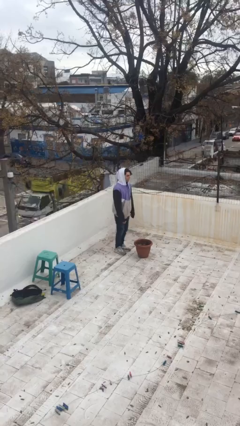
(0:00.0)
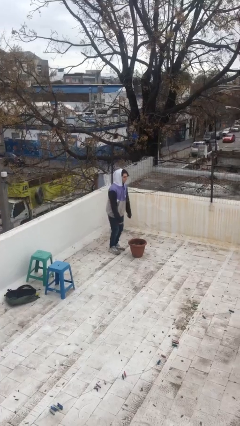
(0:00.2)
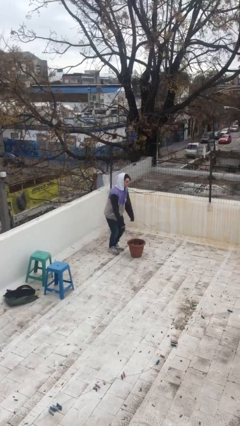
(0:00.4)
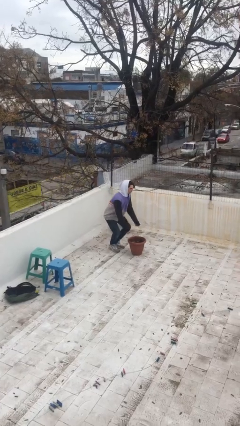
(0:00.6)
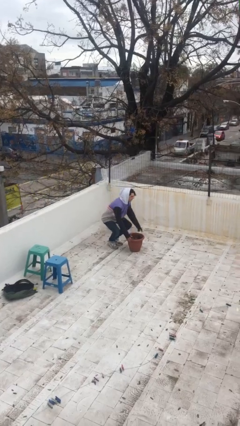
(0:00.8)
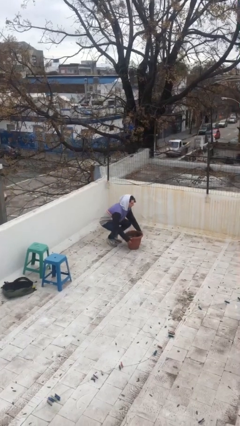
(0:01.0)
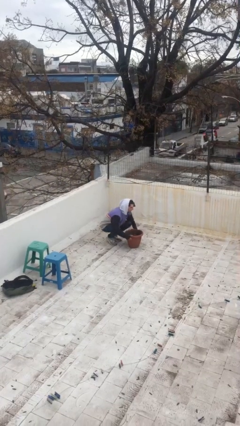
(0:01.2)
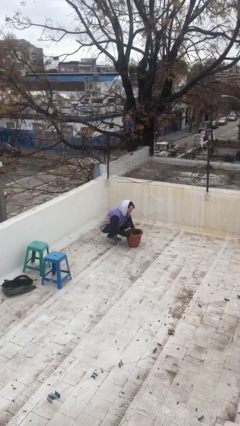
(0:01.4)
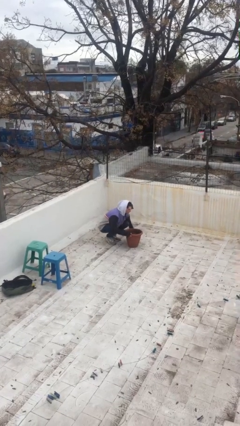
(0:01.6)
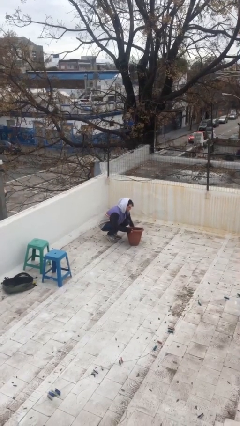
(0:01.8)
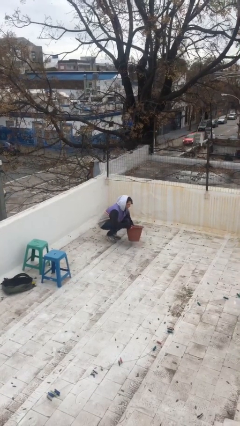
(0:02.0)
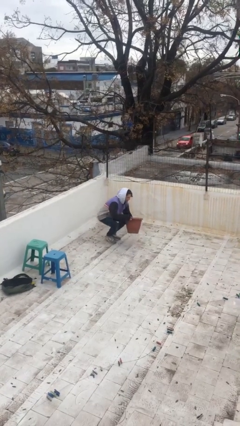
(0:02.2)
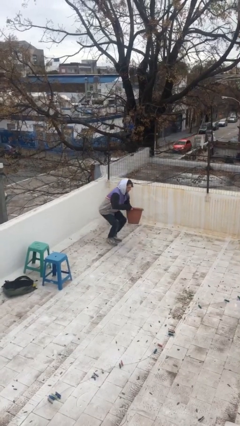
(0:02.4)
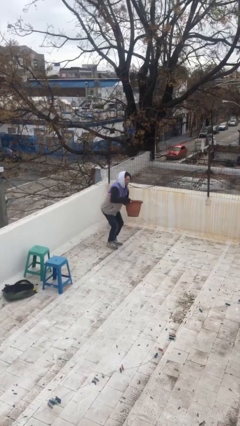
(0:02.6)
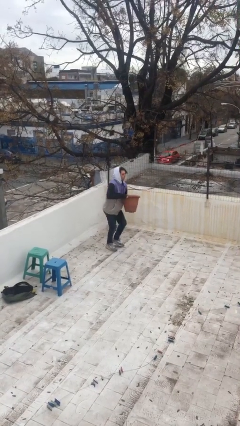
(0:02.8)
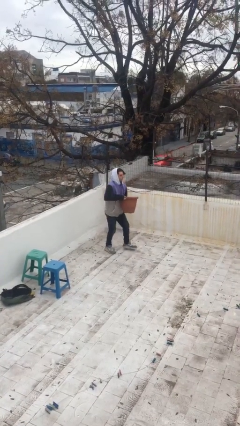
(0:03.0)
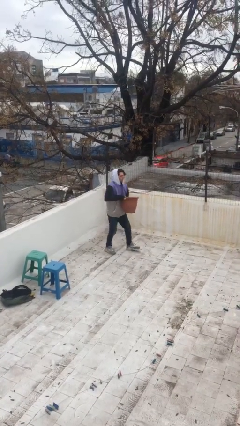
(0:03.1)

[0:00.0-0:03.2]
person picks up object from floor

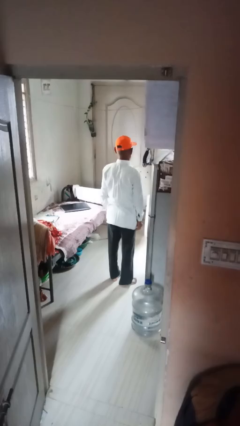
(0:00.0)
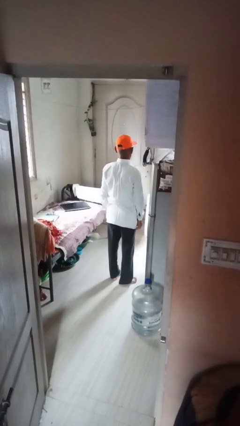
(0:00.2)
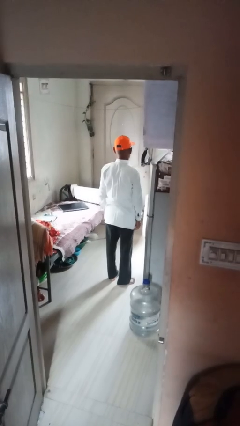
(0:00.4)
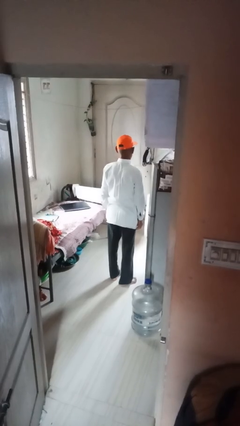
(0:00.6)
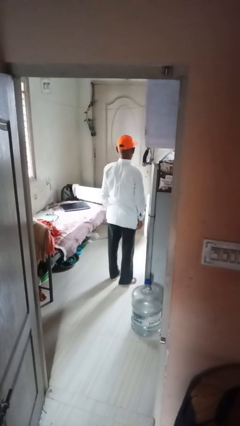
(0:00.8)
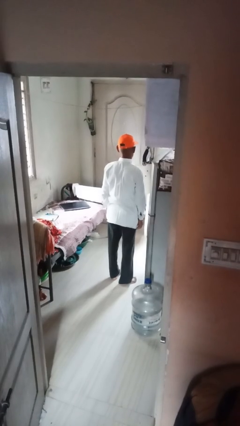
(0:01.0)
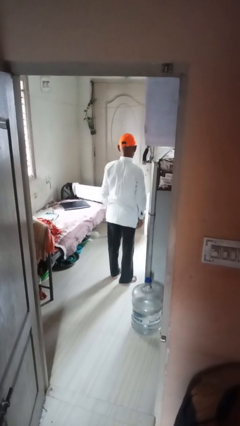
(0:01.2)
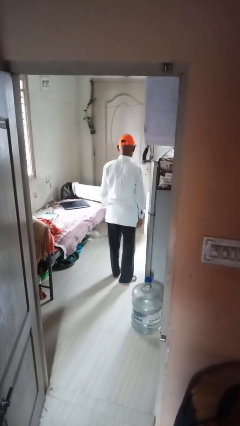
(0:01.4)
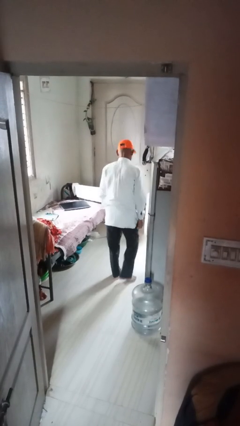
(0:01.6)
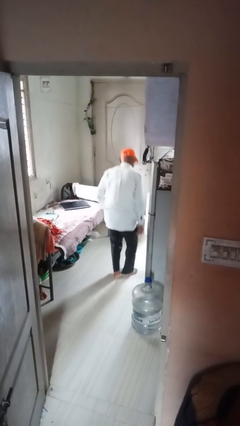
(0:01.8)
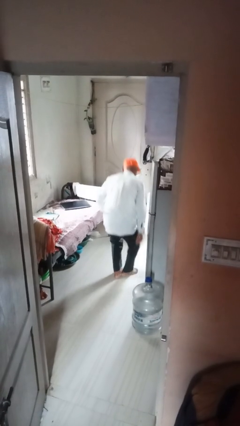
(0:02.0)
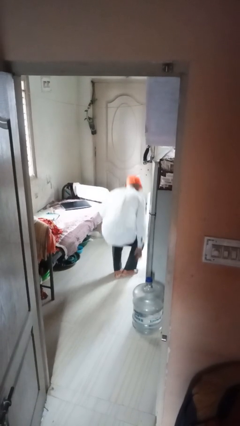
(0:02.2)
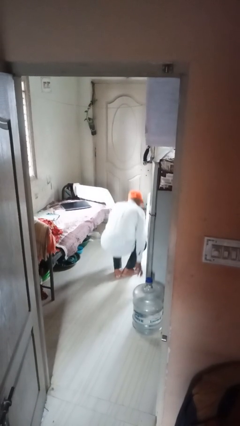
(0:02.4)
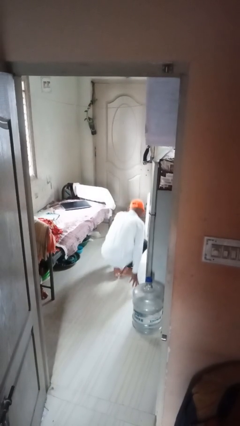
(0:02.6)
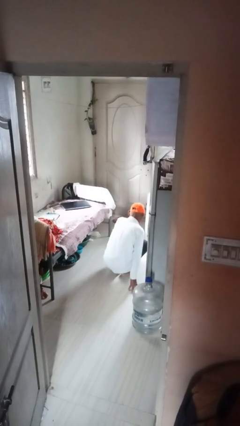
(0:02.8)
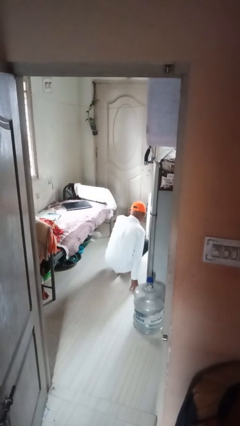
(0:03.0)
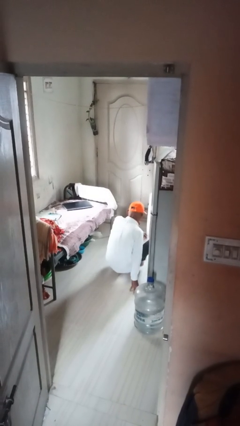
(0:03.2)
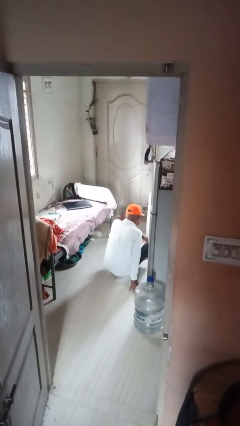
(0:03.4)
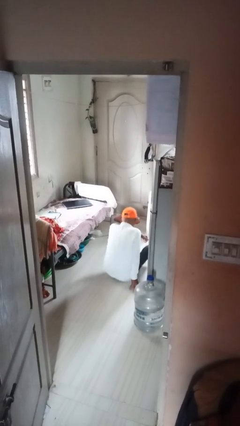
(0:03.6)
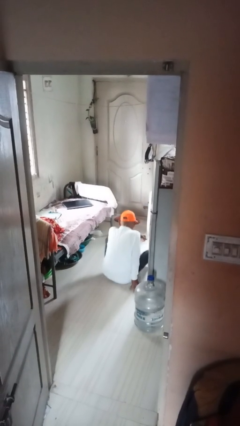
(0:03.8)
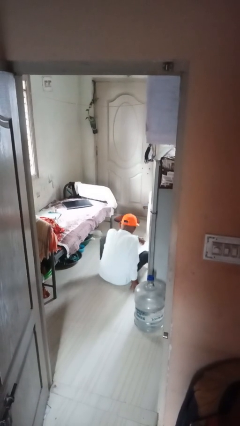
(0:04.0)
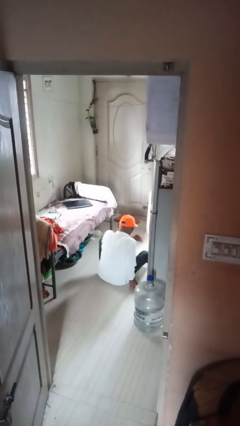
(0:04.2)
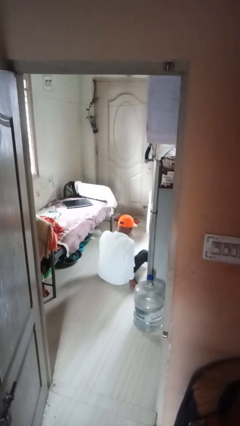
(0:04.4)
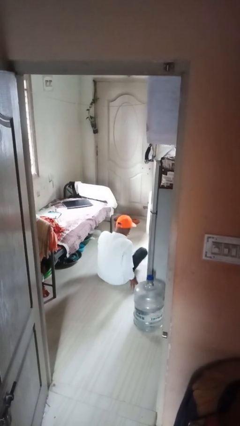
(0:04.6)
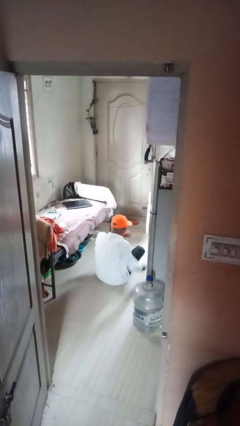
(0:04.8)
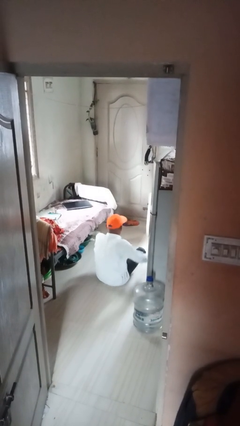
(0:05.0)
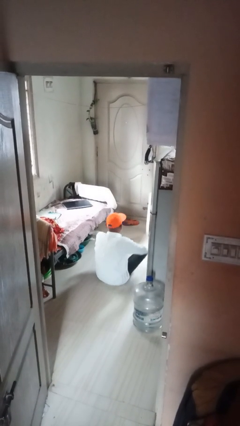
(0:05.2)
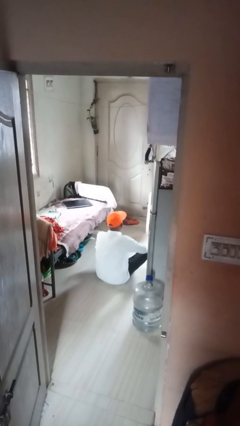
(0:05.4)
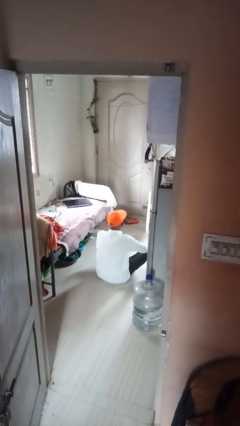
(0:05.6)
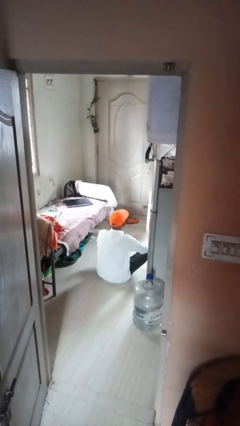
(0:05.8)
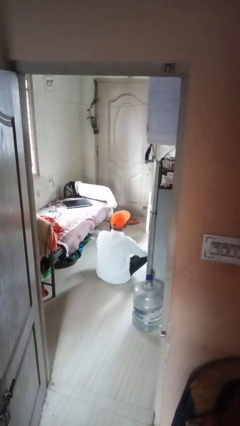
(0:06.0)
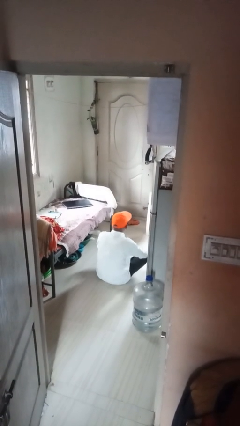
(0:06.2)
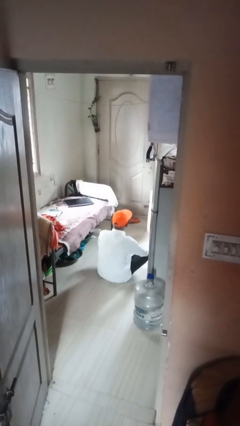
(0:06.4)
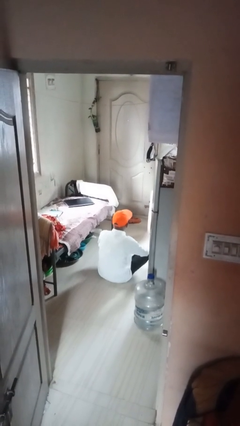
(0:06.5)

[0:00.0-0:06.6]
person sits crisscross

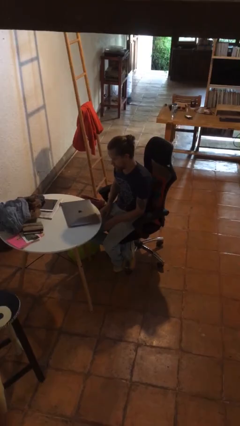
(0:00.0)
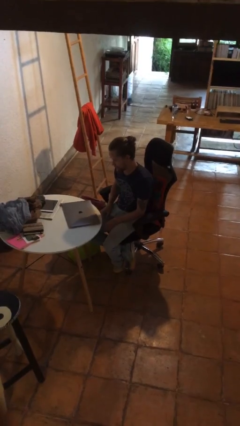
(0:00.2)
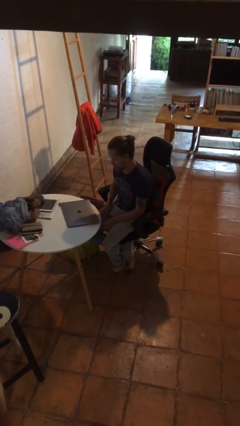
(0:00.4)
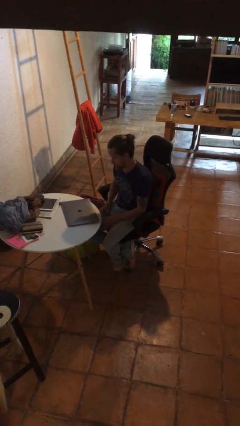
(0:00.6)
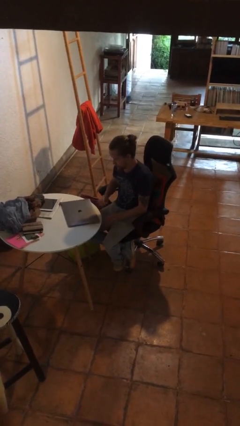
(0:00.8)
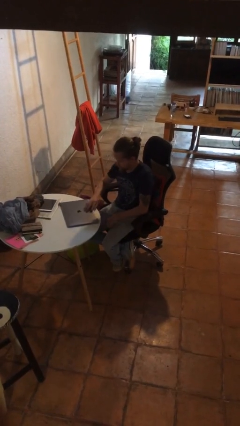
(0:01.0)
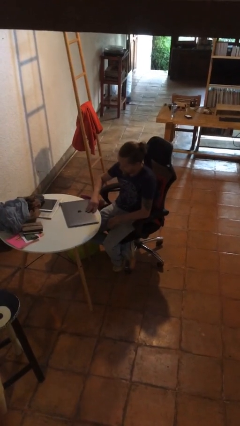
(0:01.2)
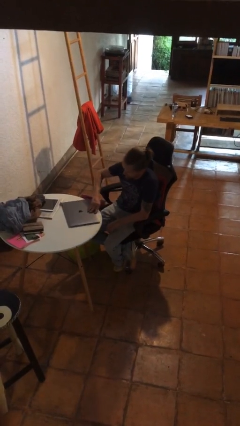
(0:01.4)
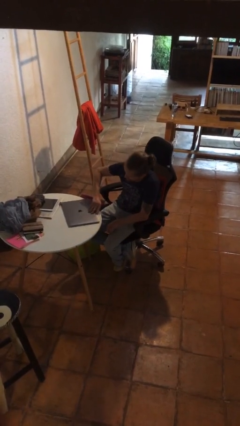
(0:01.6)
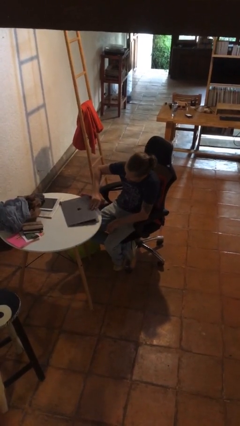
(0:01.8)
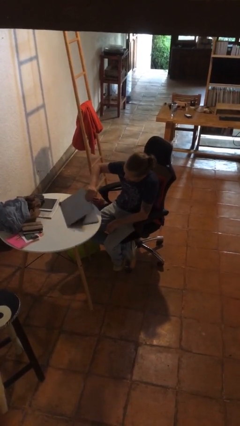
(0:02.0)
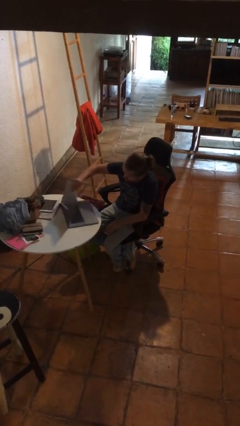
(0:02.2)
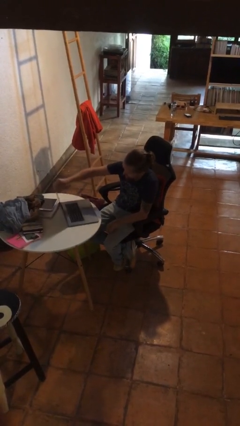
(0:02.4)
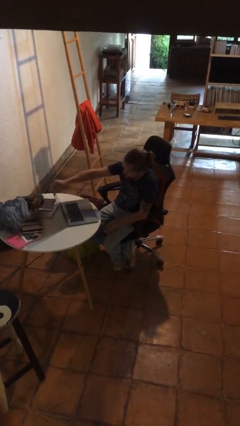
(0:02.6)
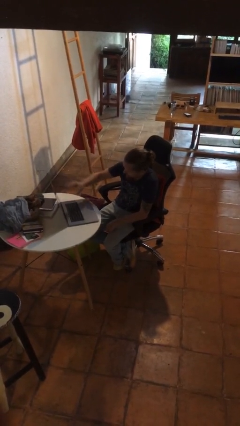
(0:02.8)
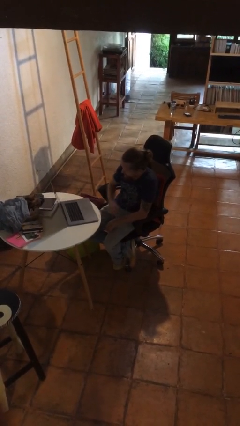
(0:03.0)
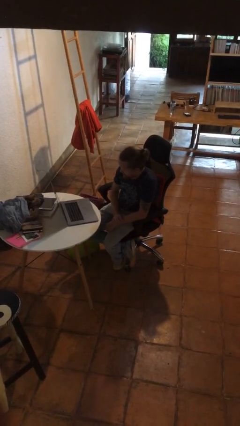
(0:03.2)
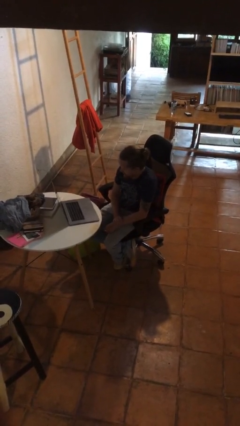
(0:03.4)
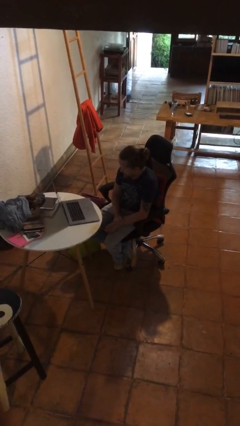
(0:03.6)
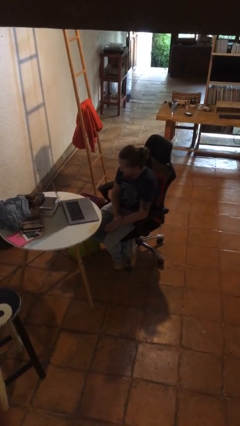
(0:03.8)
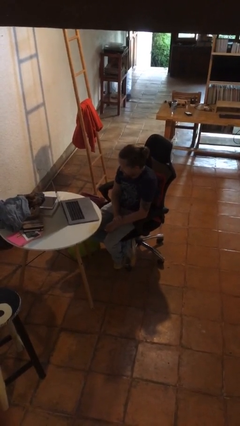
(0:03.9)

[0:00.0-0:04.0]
person opens laptop

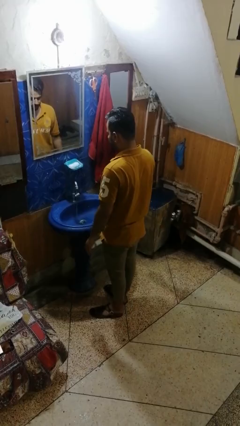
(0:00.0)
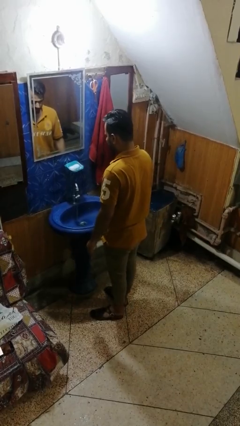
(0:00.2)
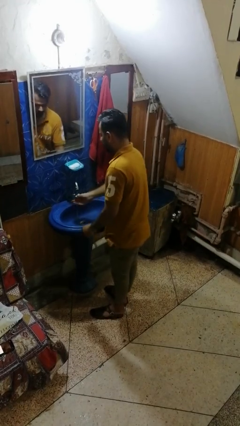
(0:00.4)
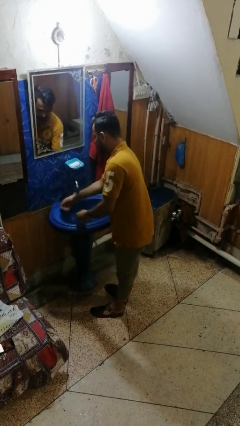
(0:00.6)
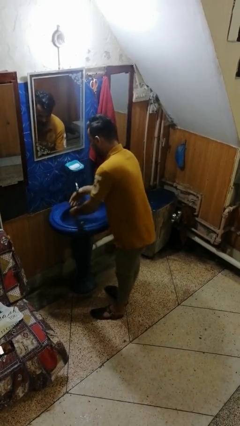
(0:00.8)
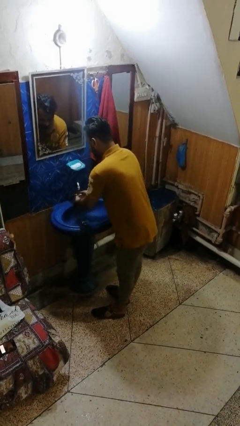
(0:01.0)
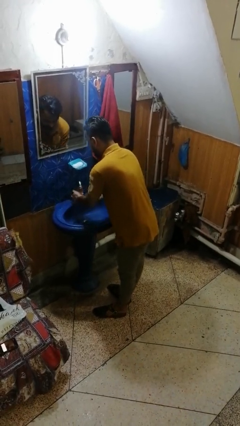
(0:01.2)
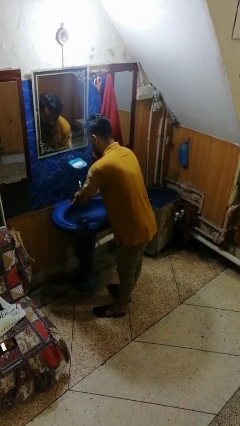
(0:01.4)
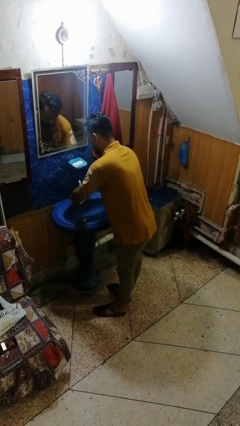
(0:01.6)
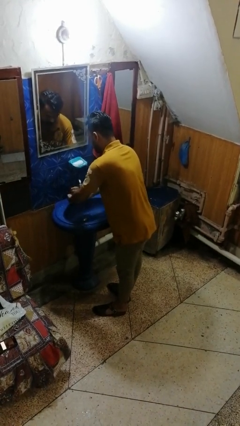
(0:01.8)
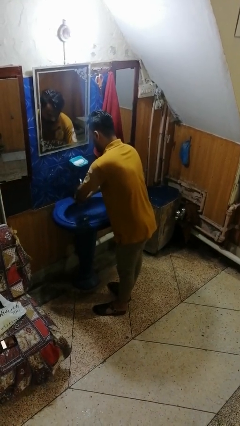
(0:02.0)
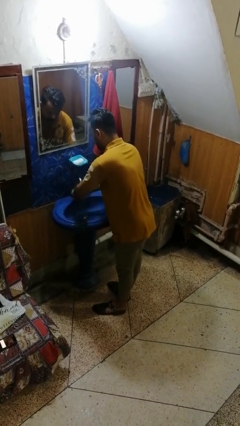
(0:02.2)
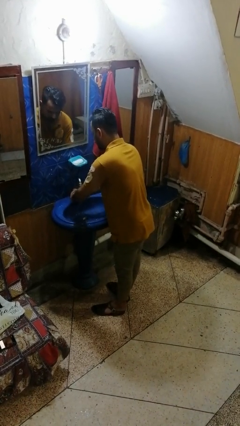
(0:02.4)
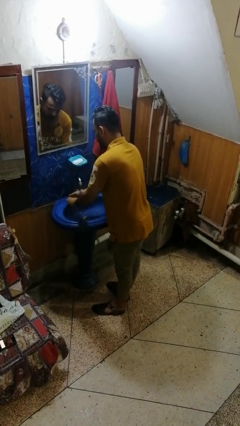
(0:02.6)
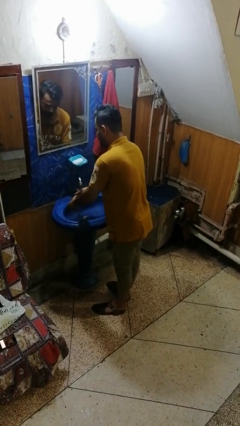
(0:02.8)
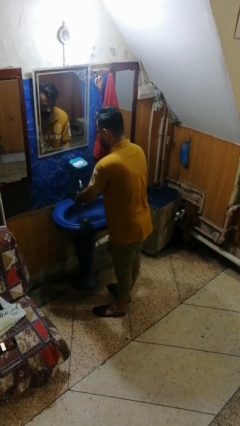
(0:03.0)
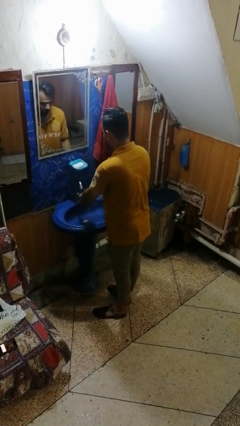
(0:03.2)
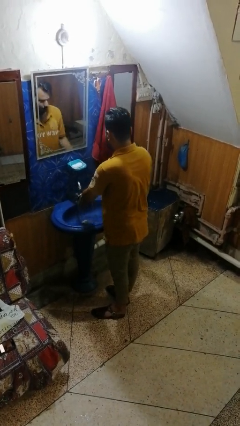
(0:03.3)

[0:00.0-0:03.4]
person washes hands

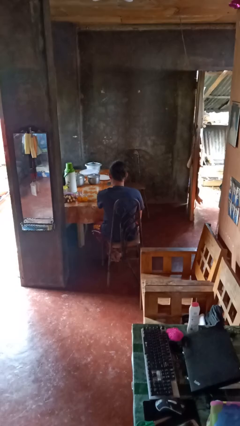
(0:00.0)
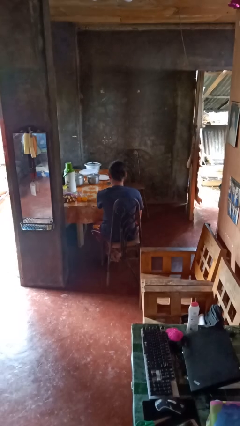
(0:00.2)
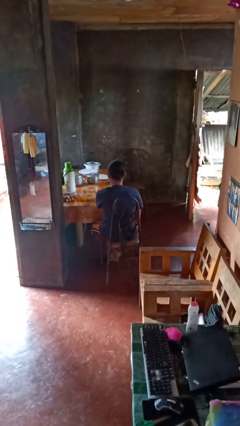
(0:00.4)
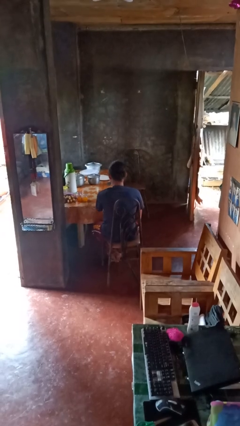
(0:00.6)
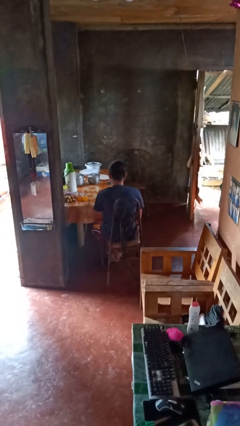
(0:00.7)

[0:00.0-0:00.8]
person puts down object on table
